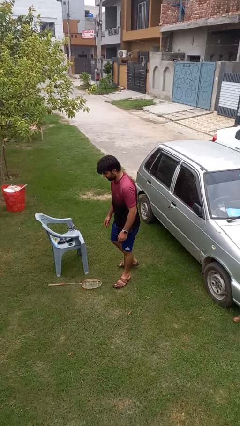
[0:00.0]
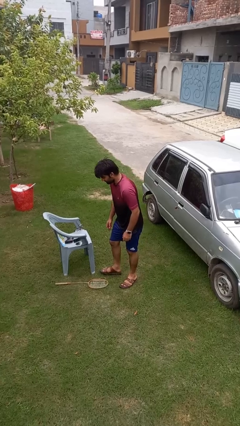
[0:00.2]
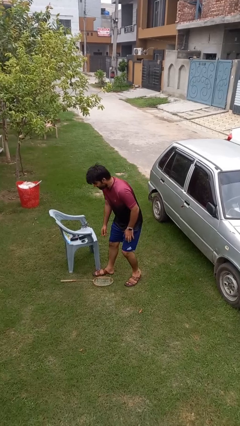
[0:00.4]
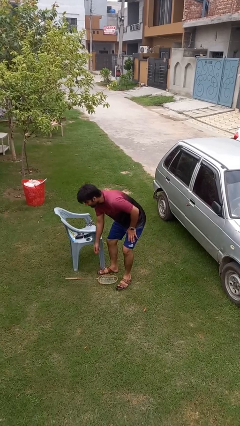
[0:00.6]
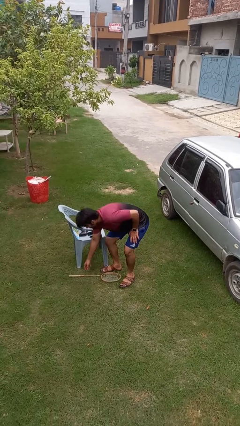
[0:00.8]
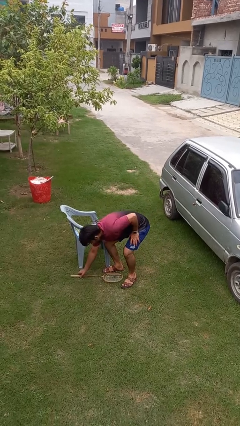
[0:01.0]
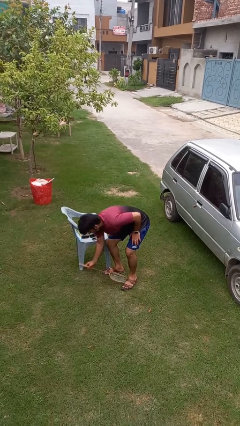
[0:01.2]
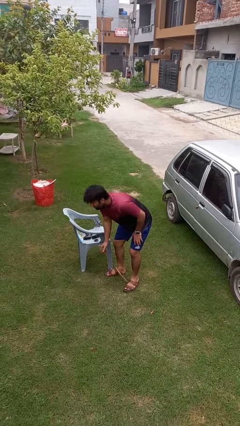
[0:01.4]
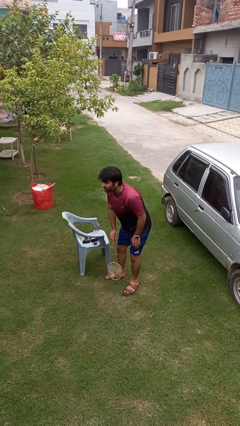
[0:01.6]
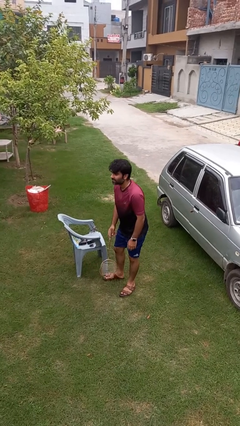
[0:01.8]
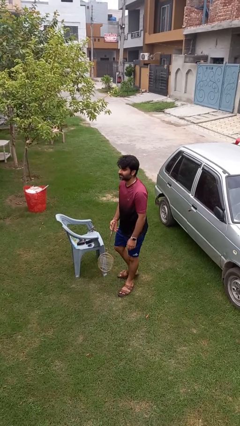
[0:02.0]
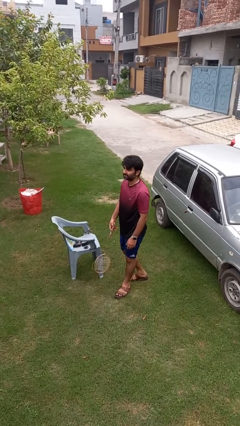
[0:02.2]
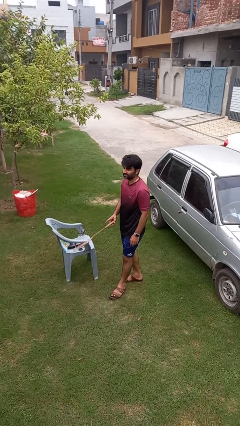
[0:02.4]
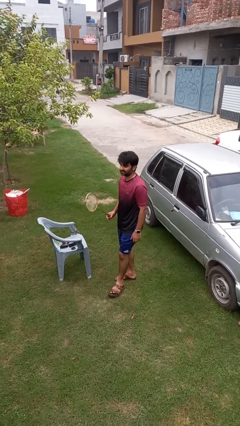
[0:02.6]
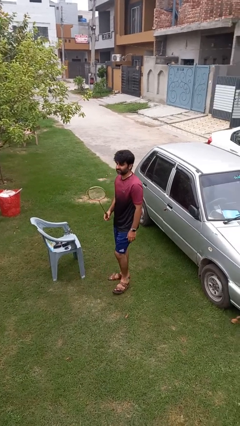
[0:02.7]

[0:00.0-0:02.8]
person picks up object from floor

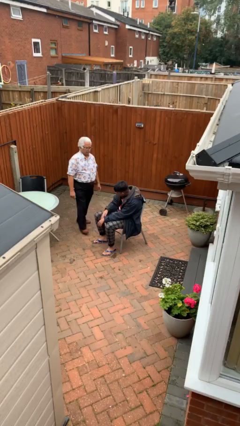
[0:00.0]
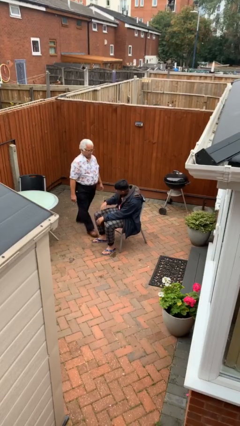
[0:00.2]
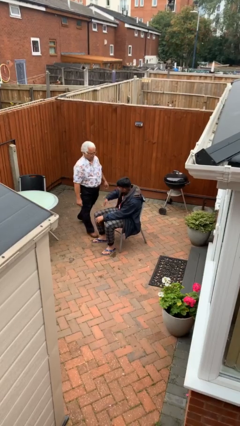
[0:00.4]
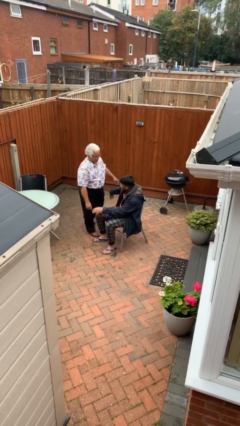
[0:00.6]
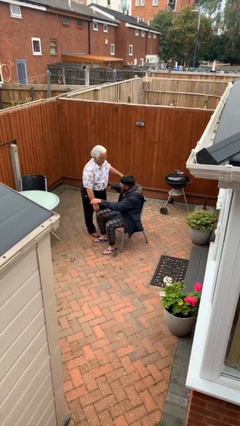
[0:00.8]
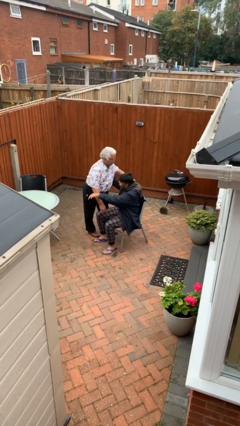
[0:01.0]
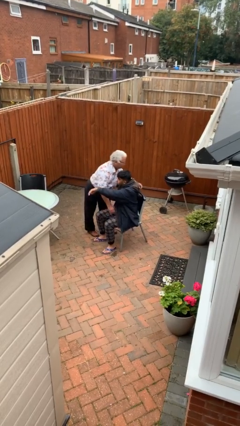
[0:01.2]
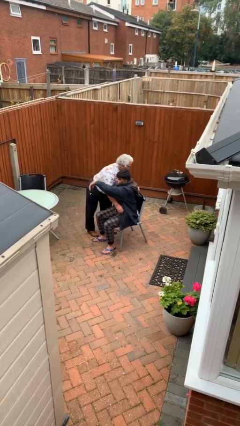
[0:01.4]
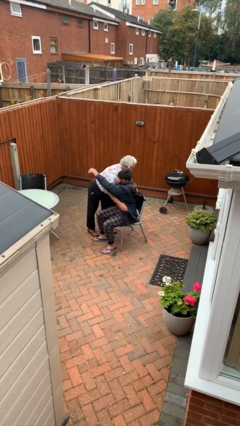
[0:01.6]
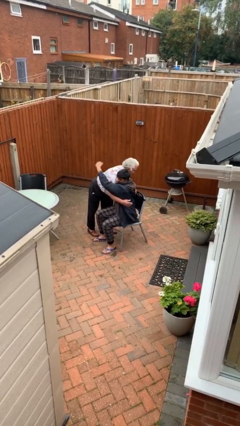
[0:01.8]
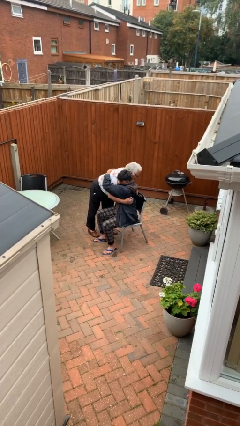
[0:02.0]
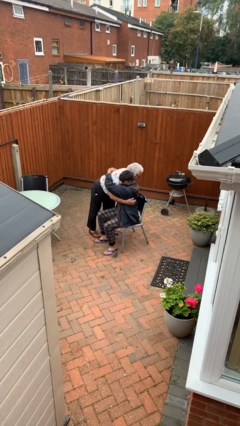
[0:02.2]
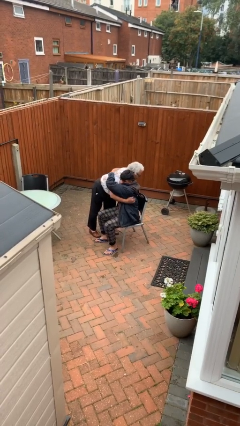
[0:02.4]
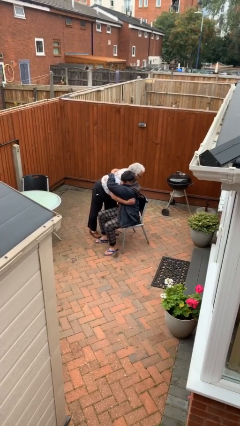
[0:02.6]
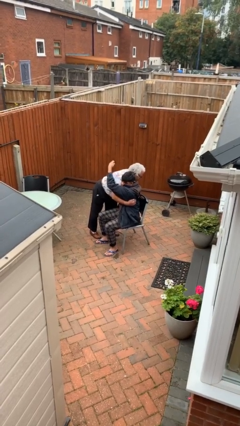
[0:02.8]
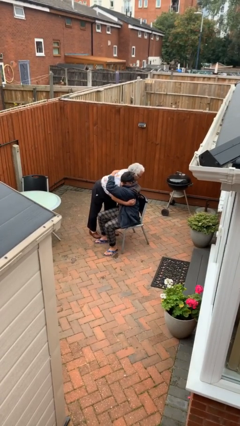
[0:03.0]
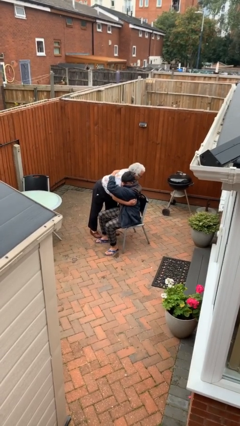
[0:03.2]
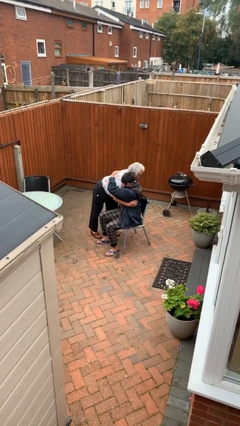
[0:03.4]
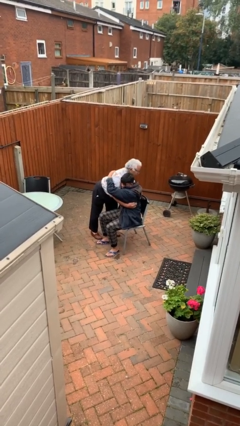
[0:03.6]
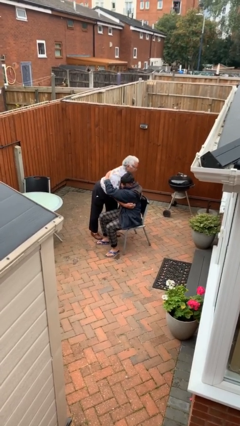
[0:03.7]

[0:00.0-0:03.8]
person embraces person

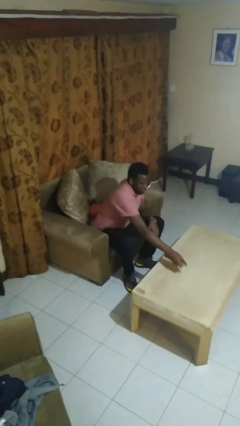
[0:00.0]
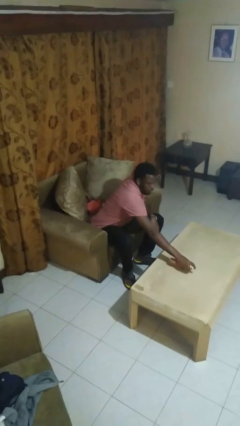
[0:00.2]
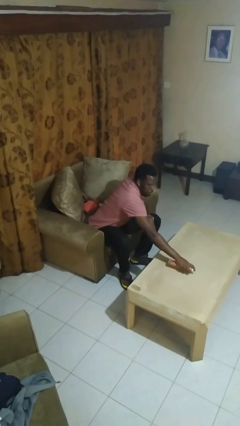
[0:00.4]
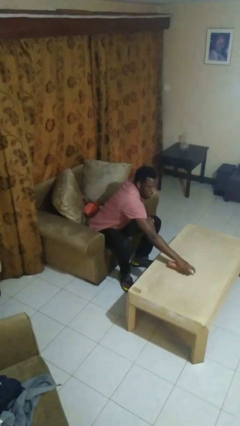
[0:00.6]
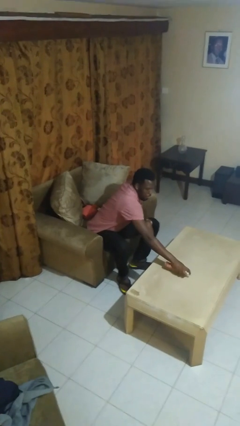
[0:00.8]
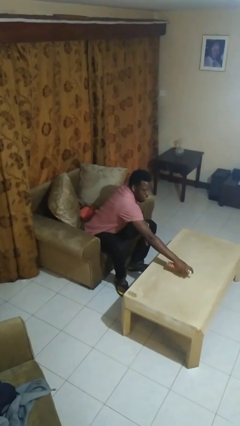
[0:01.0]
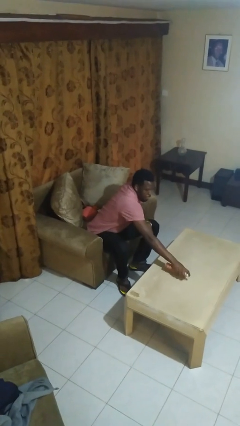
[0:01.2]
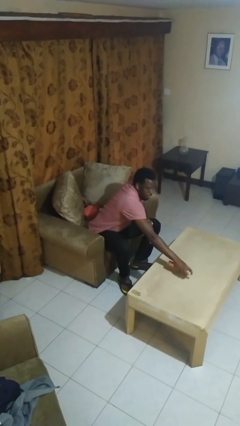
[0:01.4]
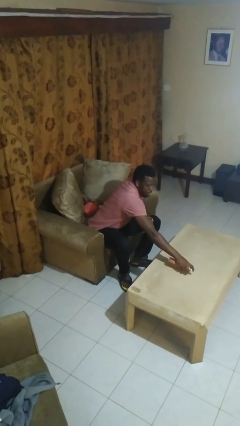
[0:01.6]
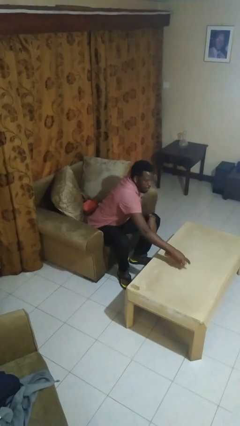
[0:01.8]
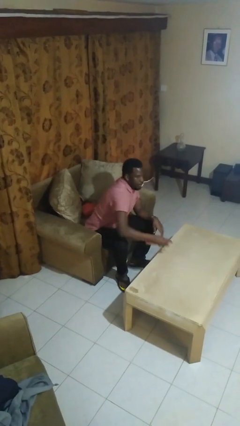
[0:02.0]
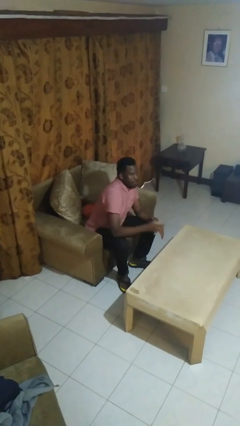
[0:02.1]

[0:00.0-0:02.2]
person sprays from bottle

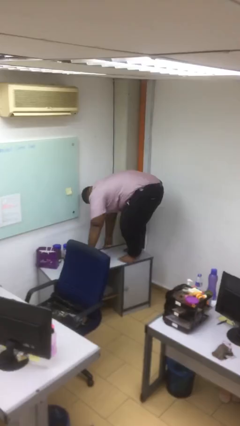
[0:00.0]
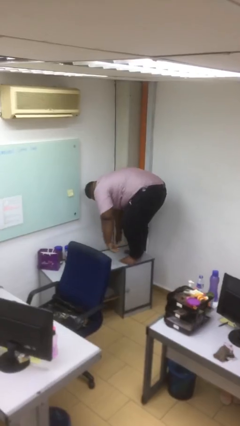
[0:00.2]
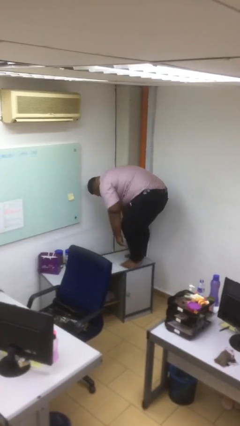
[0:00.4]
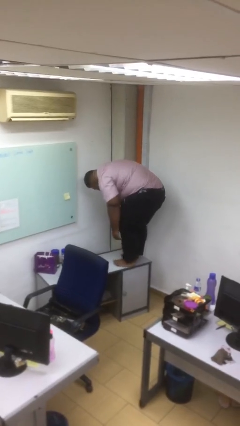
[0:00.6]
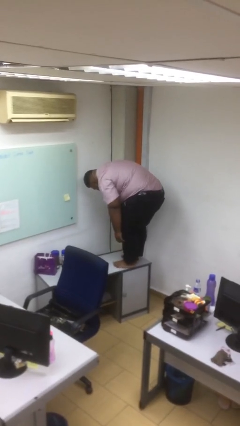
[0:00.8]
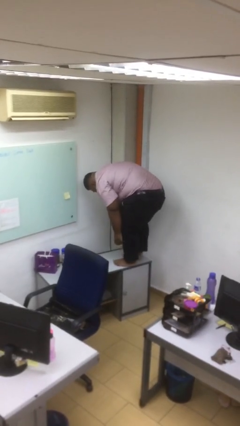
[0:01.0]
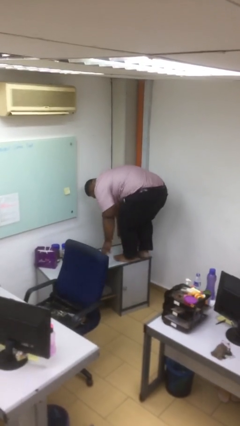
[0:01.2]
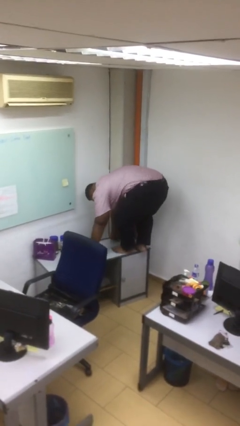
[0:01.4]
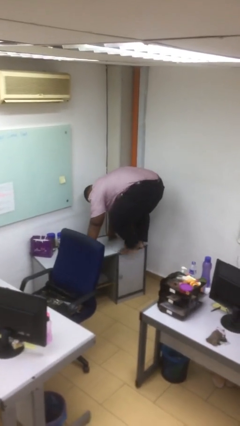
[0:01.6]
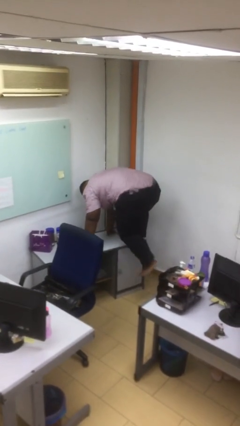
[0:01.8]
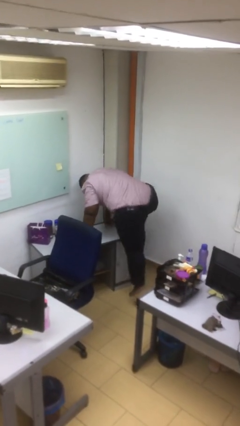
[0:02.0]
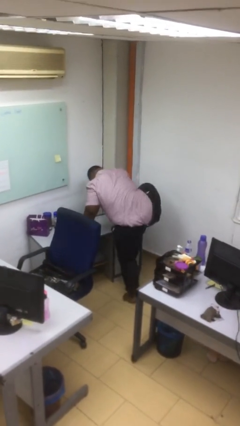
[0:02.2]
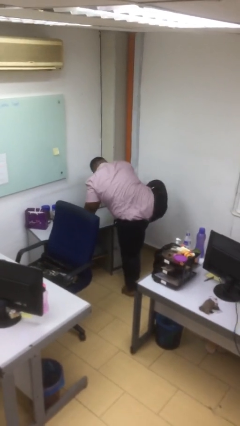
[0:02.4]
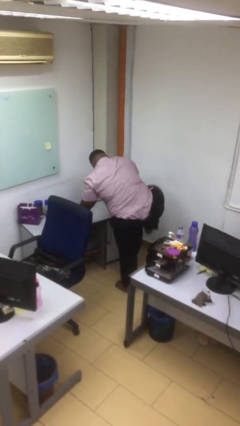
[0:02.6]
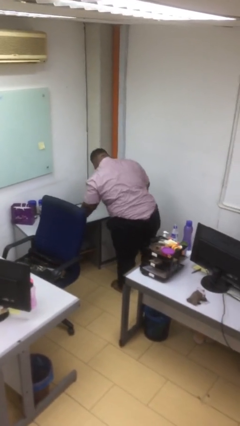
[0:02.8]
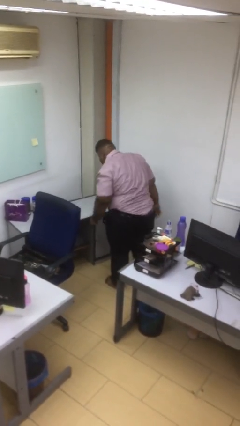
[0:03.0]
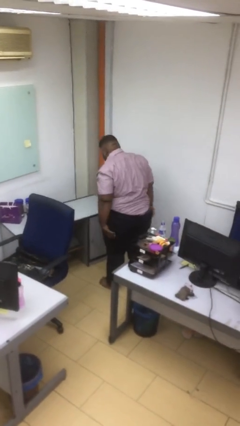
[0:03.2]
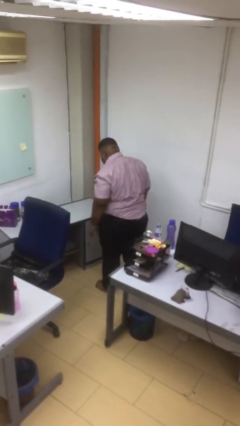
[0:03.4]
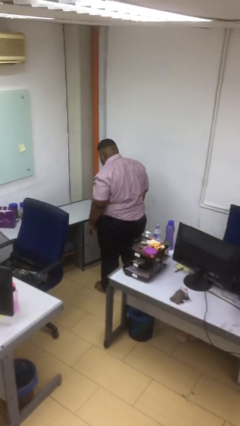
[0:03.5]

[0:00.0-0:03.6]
person climbs off table

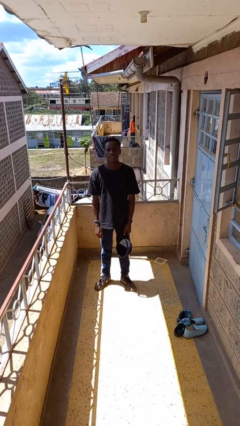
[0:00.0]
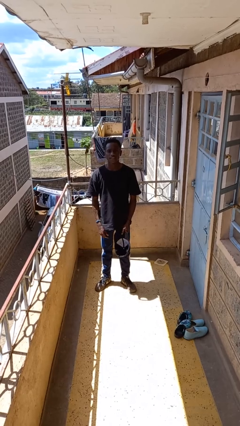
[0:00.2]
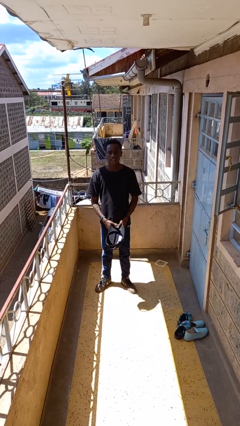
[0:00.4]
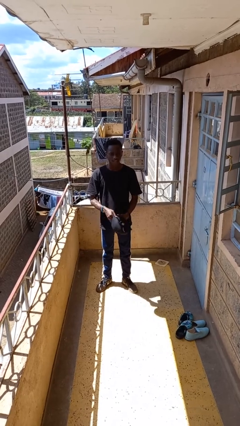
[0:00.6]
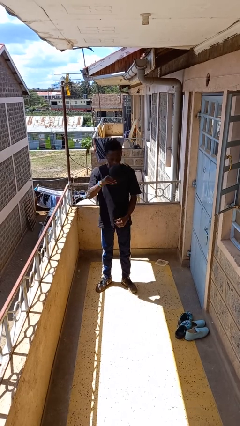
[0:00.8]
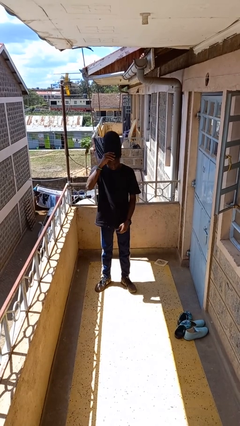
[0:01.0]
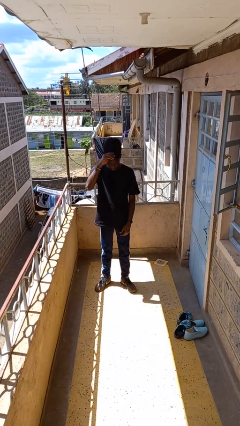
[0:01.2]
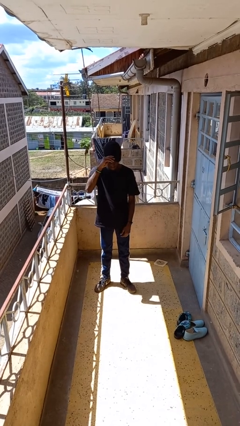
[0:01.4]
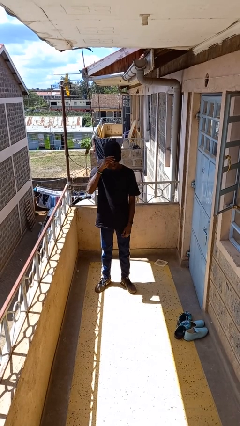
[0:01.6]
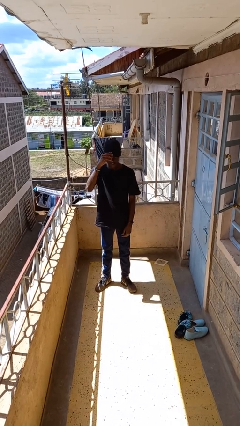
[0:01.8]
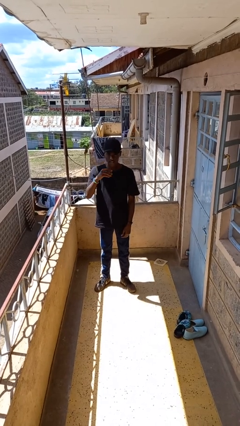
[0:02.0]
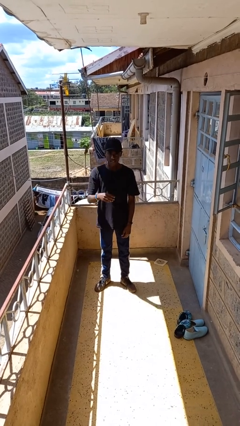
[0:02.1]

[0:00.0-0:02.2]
person puts on hat

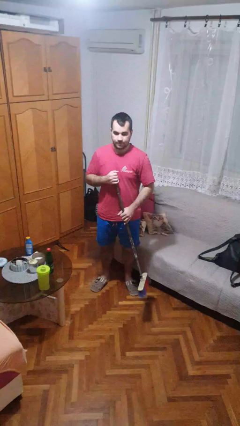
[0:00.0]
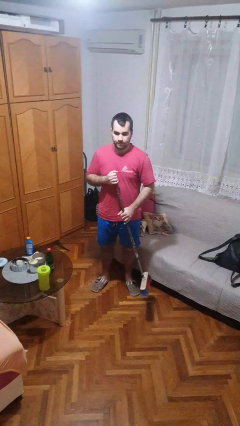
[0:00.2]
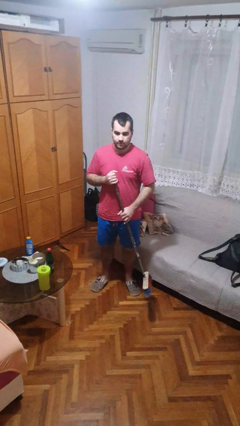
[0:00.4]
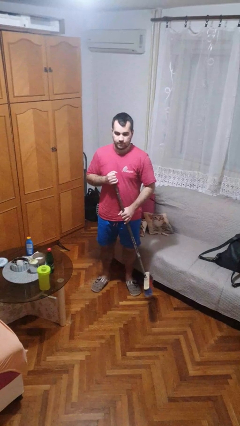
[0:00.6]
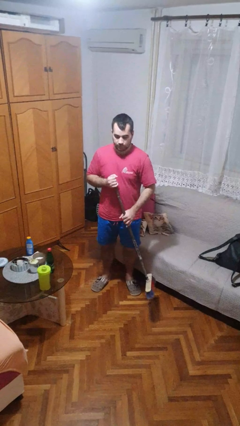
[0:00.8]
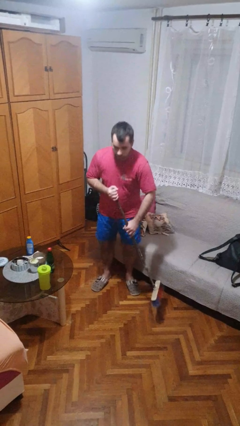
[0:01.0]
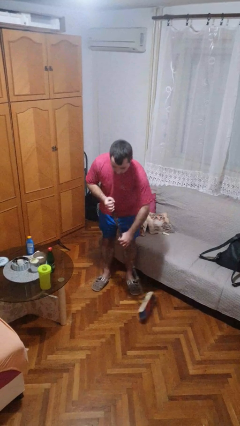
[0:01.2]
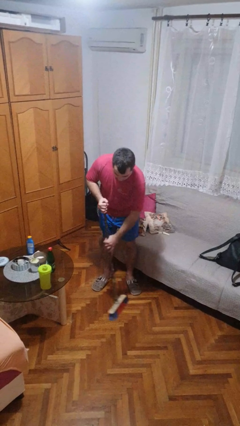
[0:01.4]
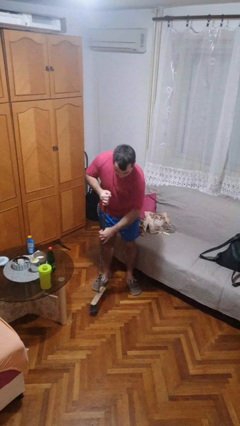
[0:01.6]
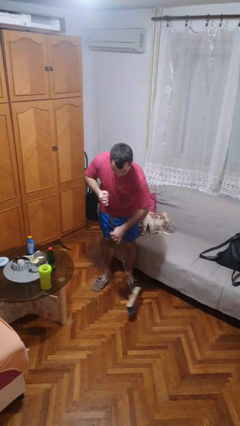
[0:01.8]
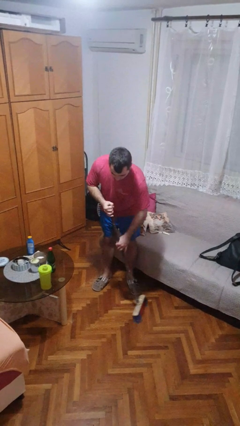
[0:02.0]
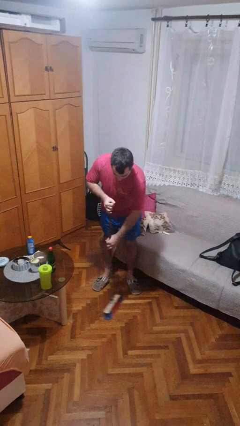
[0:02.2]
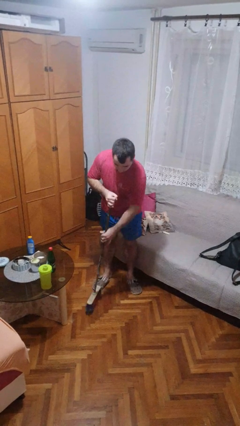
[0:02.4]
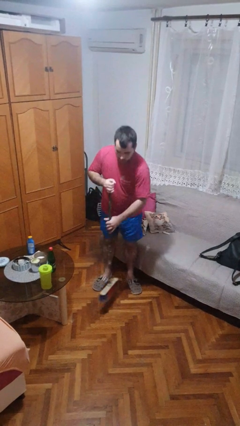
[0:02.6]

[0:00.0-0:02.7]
person sweeps floor
